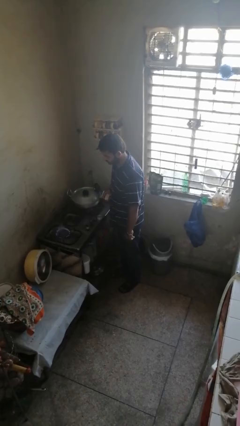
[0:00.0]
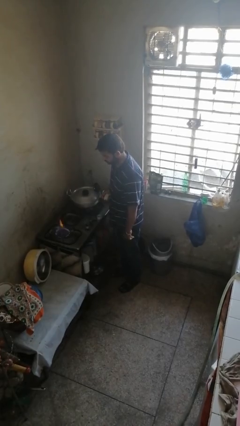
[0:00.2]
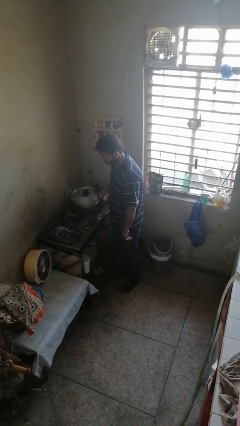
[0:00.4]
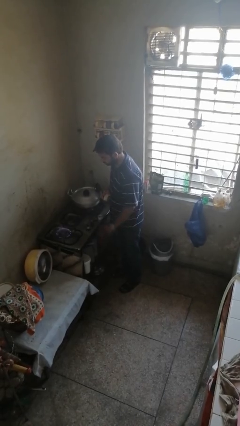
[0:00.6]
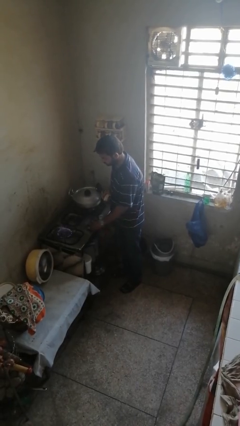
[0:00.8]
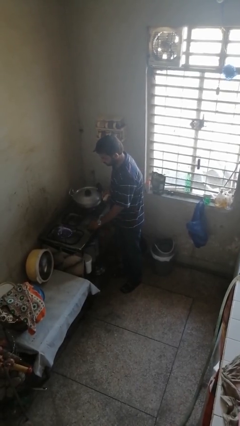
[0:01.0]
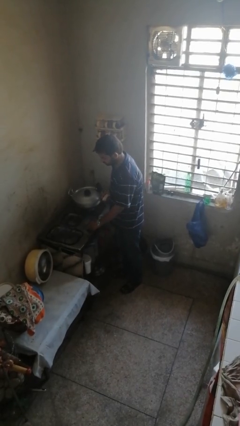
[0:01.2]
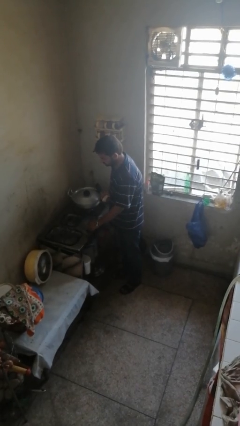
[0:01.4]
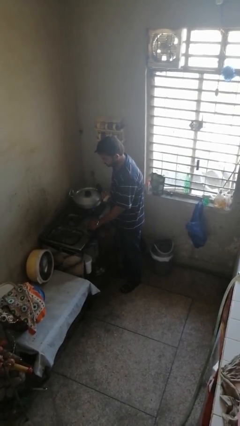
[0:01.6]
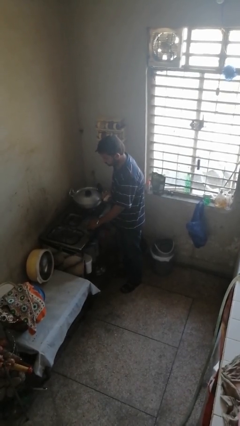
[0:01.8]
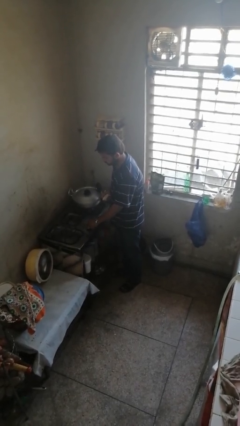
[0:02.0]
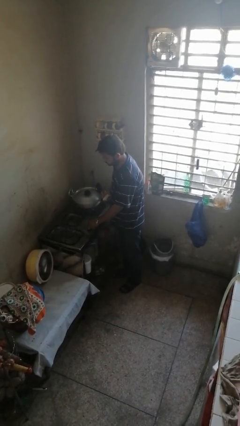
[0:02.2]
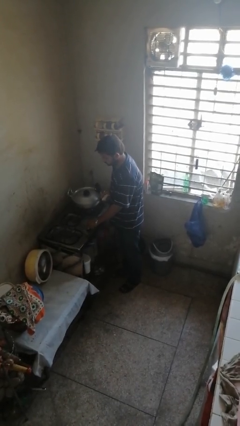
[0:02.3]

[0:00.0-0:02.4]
person turns off stovetop

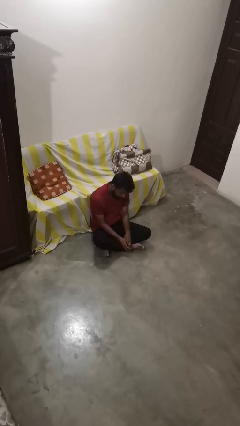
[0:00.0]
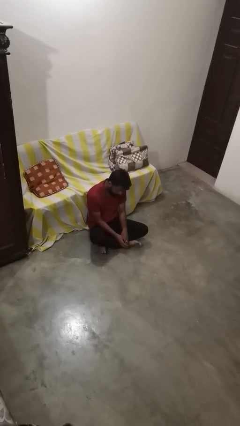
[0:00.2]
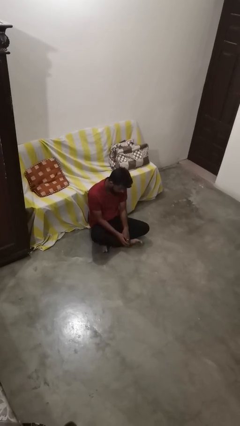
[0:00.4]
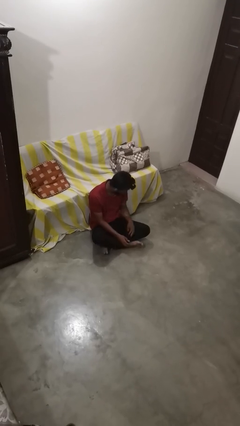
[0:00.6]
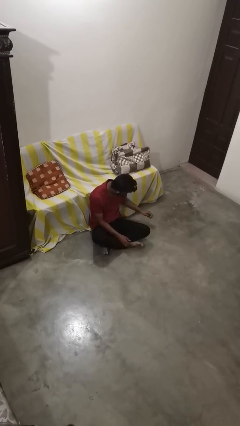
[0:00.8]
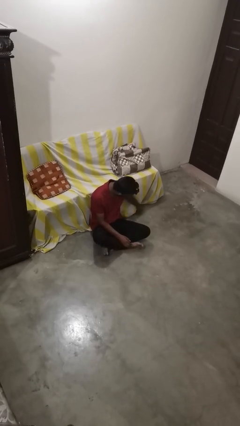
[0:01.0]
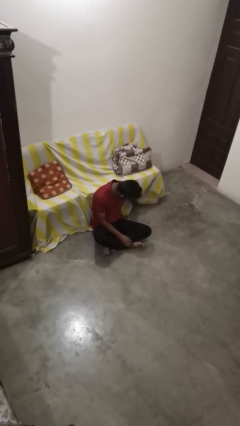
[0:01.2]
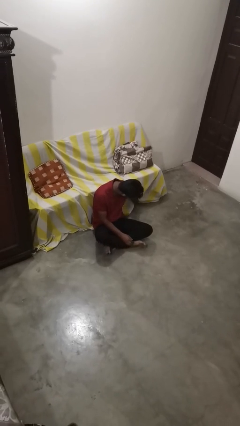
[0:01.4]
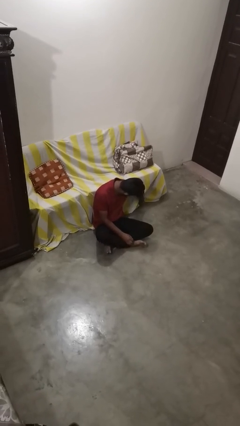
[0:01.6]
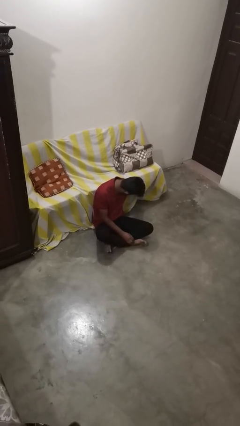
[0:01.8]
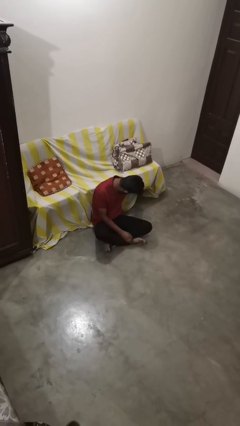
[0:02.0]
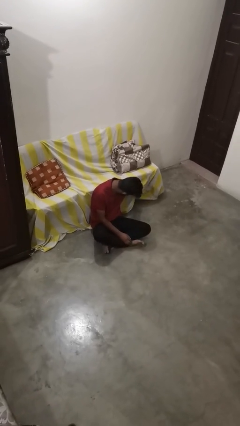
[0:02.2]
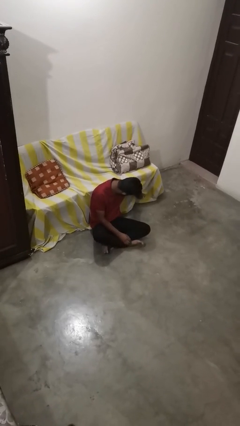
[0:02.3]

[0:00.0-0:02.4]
person searches under couch

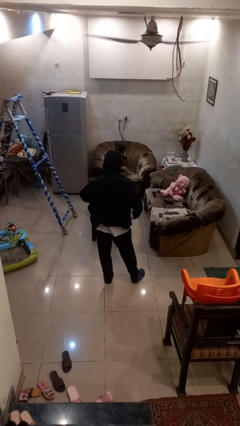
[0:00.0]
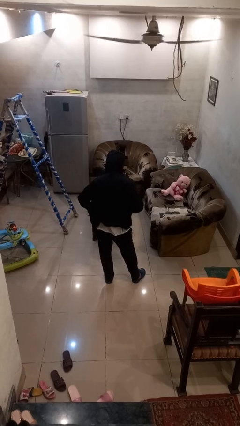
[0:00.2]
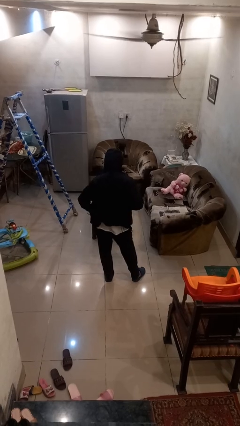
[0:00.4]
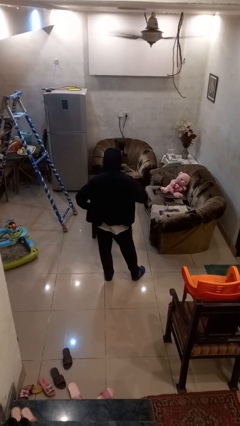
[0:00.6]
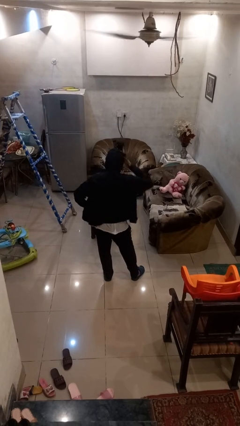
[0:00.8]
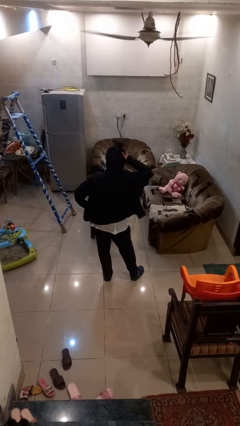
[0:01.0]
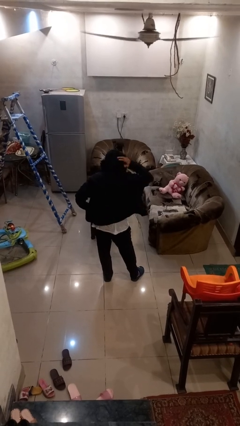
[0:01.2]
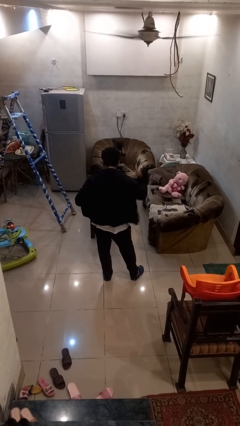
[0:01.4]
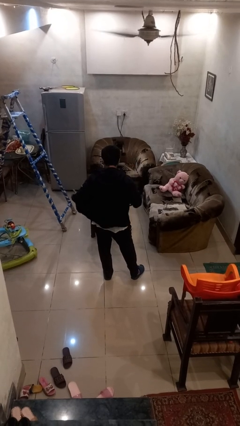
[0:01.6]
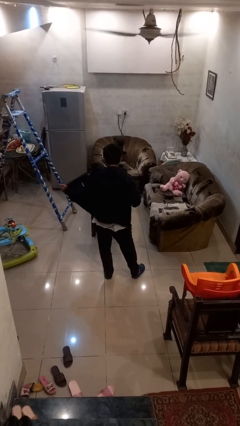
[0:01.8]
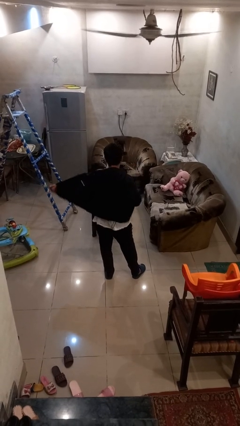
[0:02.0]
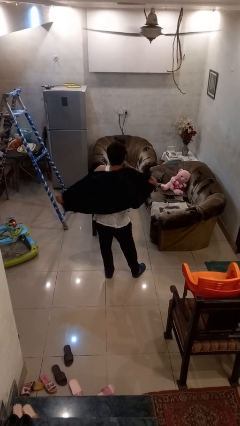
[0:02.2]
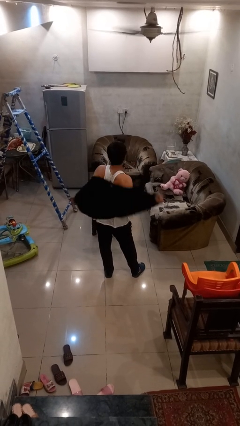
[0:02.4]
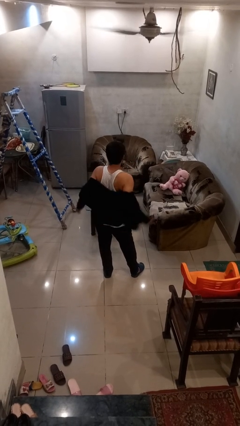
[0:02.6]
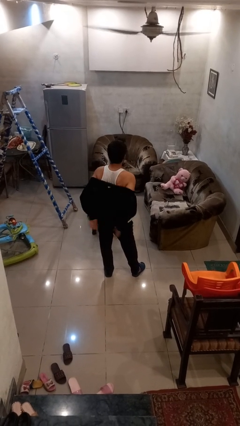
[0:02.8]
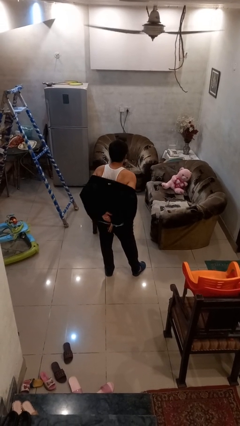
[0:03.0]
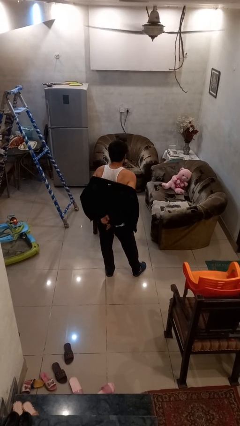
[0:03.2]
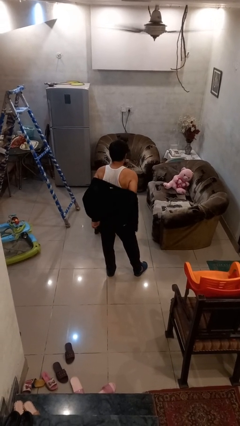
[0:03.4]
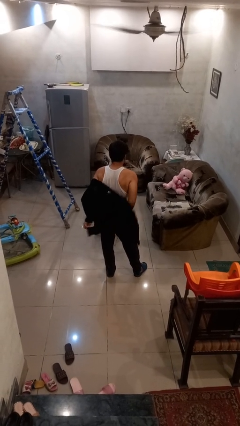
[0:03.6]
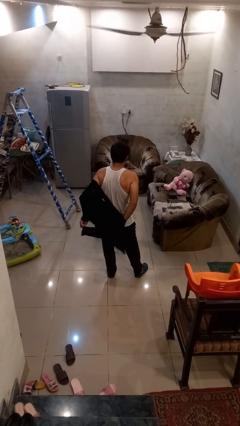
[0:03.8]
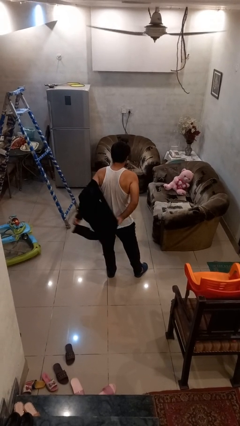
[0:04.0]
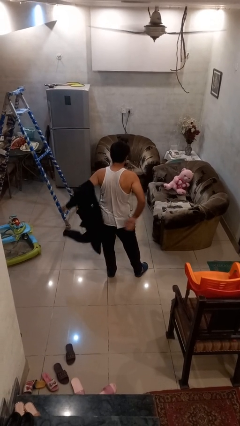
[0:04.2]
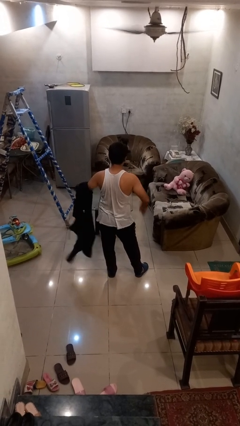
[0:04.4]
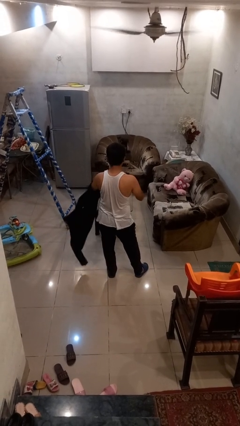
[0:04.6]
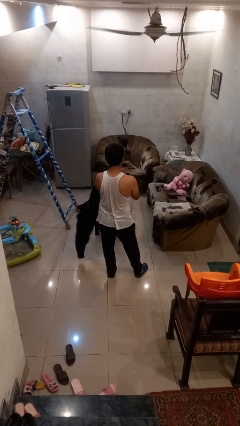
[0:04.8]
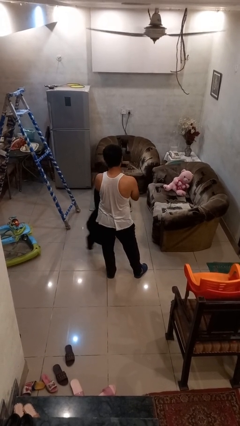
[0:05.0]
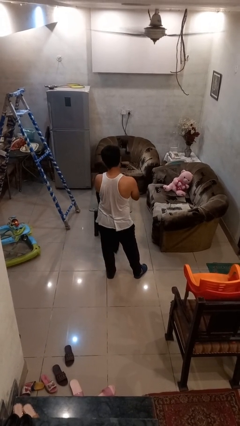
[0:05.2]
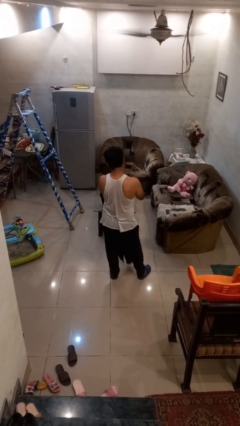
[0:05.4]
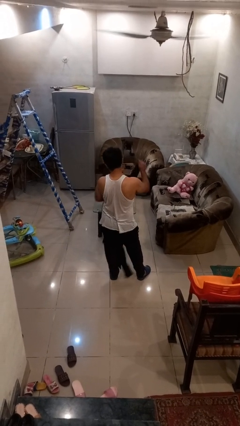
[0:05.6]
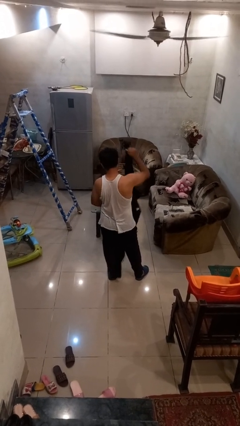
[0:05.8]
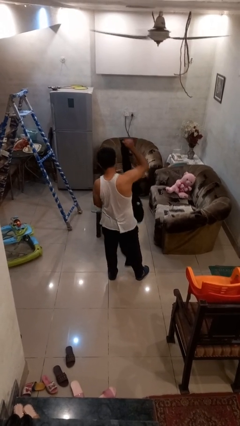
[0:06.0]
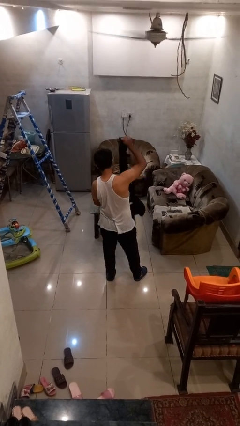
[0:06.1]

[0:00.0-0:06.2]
person takes off hoodie

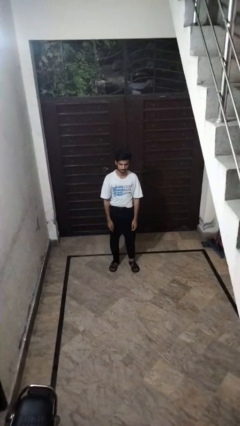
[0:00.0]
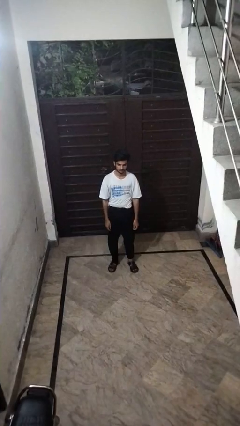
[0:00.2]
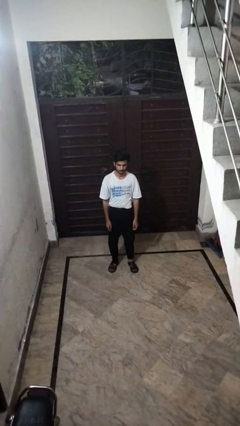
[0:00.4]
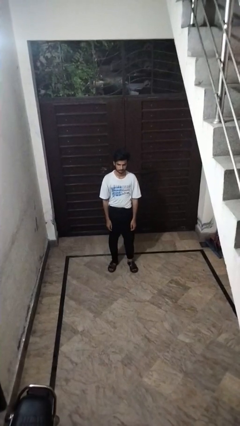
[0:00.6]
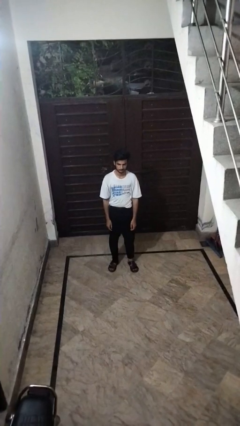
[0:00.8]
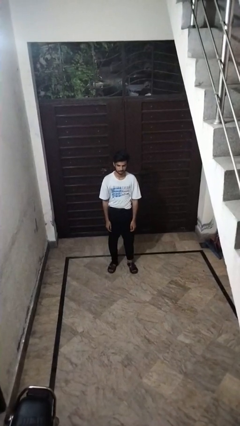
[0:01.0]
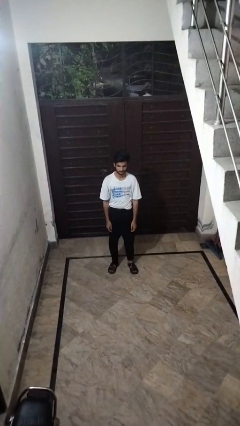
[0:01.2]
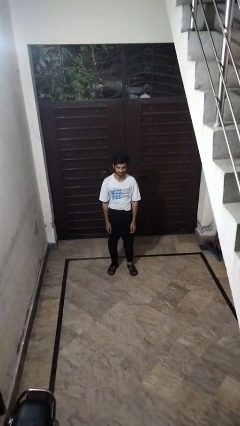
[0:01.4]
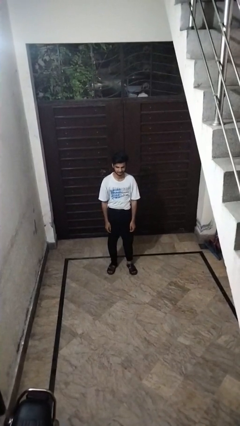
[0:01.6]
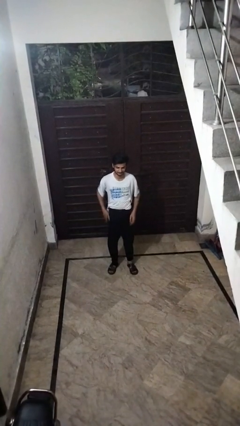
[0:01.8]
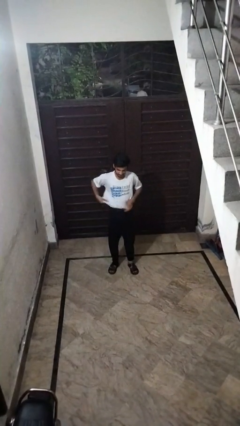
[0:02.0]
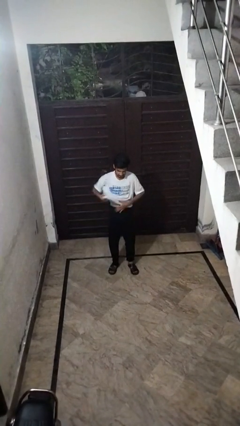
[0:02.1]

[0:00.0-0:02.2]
person locks door with keys

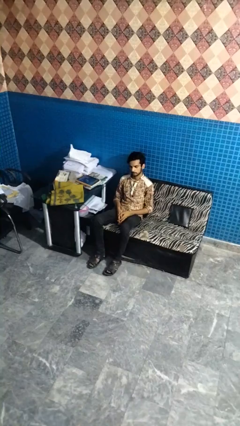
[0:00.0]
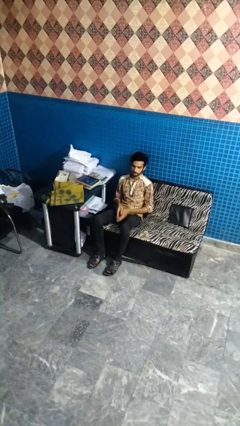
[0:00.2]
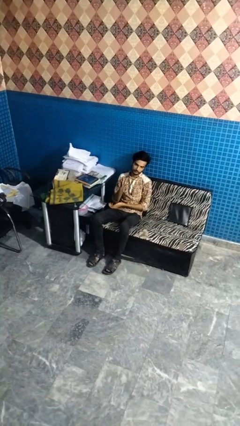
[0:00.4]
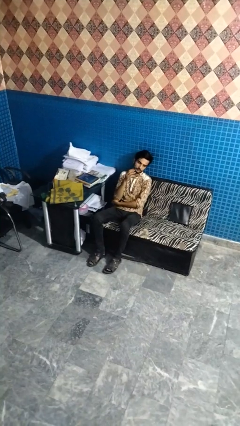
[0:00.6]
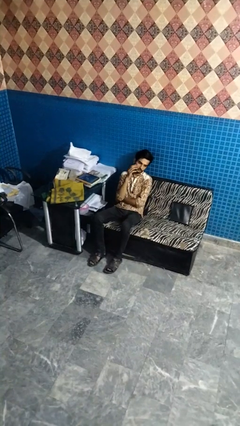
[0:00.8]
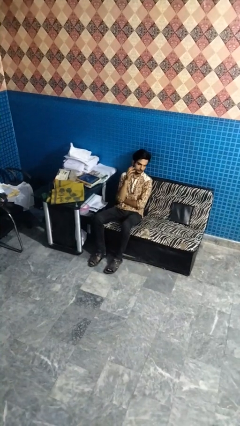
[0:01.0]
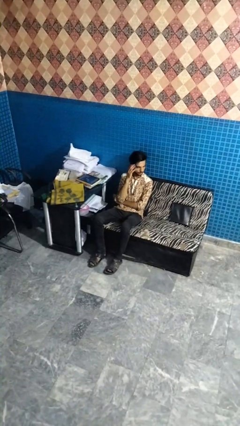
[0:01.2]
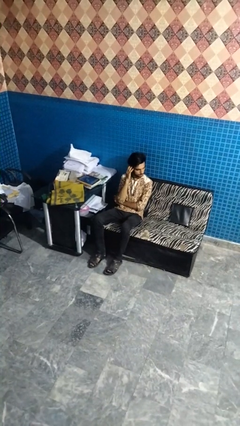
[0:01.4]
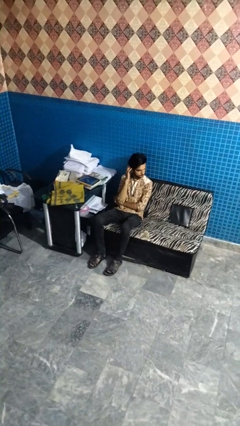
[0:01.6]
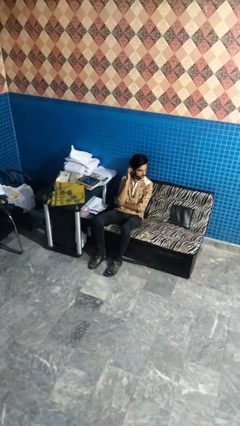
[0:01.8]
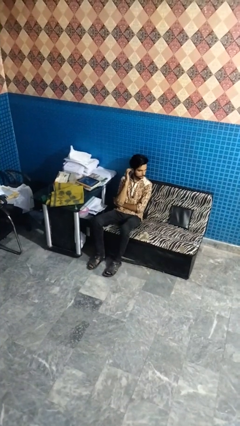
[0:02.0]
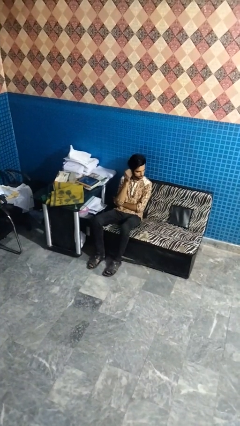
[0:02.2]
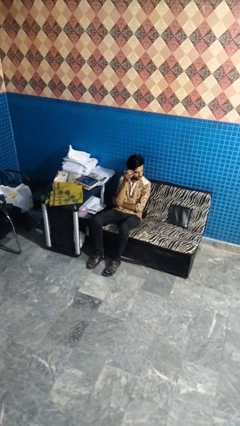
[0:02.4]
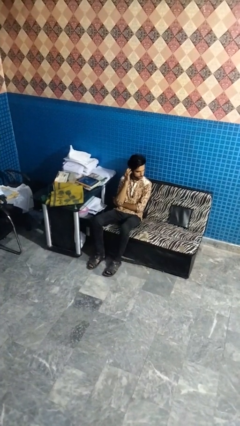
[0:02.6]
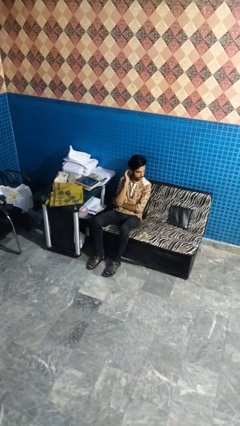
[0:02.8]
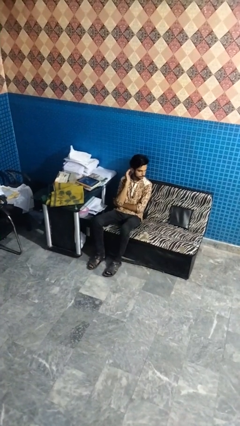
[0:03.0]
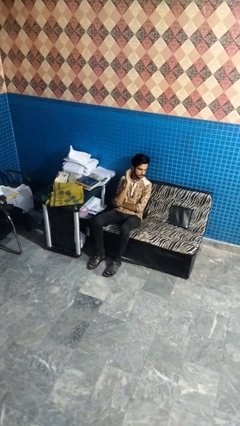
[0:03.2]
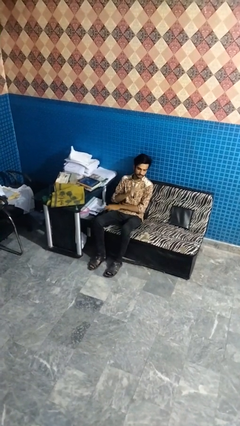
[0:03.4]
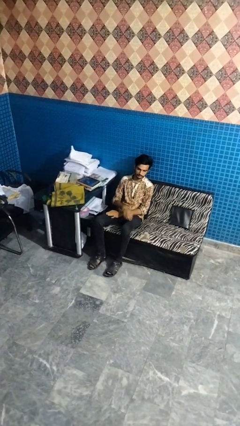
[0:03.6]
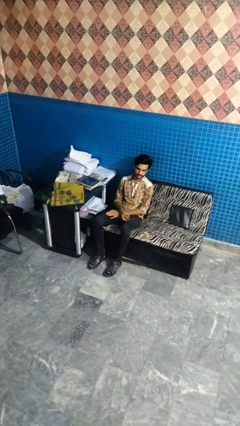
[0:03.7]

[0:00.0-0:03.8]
person strokes hair

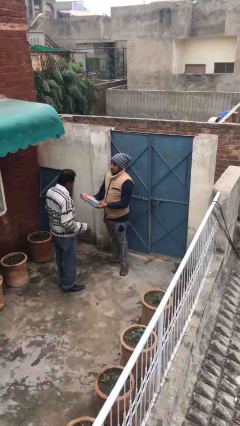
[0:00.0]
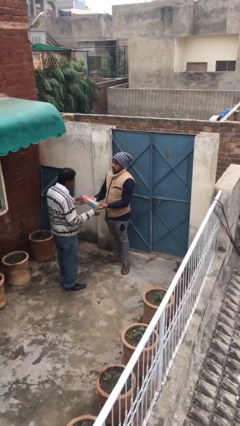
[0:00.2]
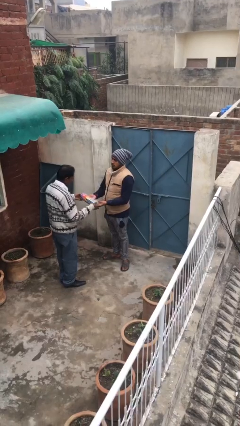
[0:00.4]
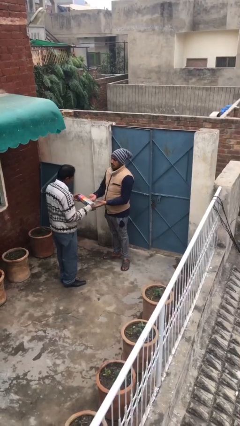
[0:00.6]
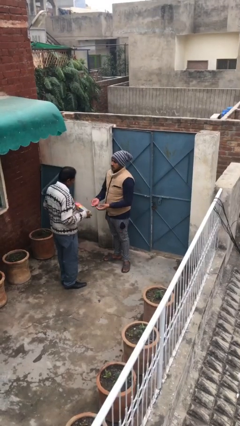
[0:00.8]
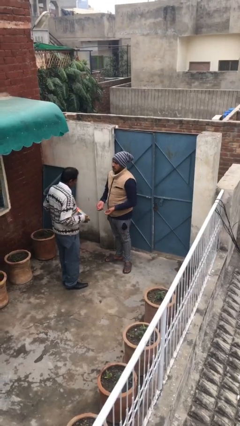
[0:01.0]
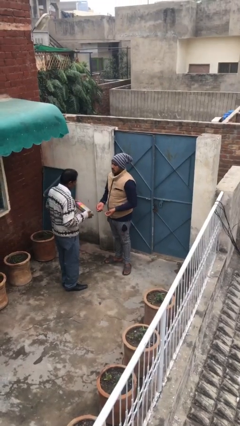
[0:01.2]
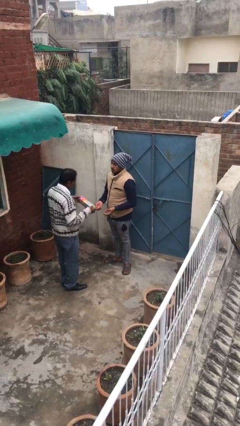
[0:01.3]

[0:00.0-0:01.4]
person transfers object to person
